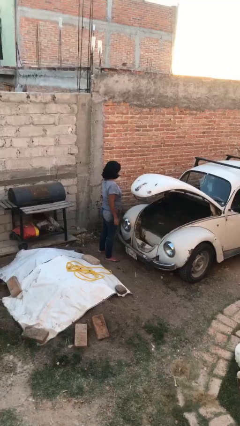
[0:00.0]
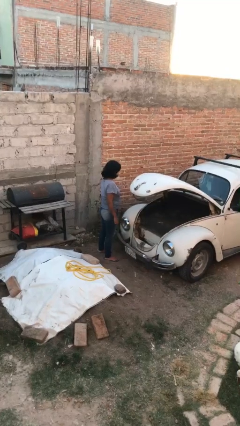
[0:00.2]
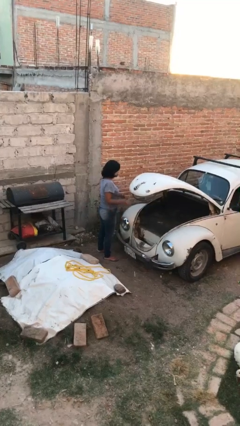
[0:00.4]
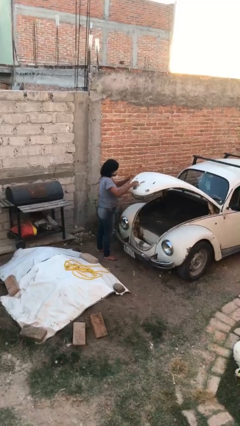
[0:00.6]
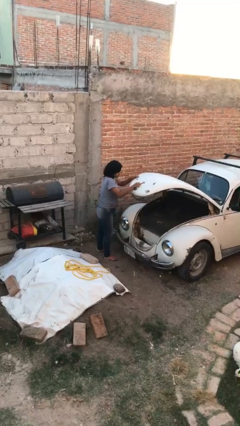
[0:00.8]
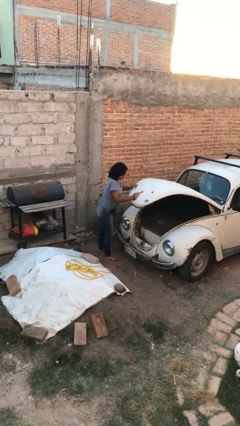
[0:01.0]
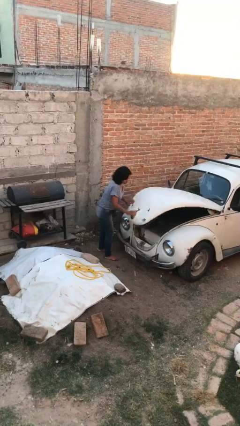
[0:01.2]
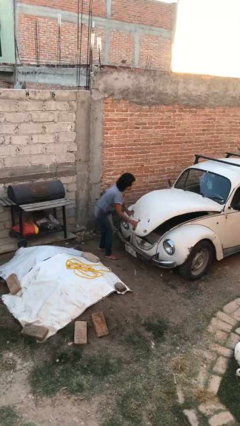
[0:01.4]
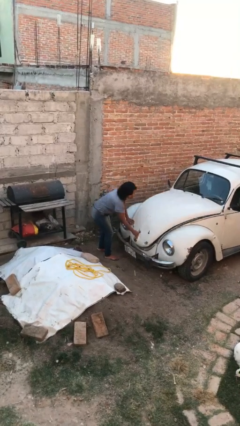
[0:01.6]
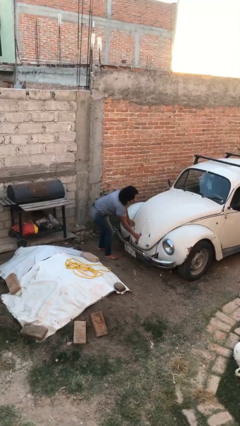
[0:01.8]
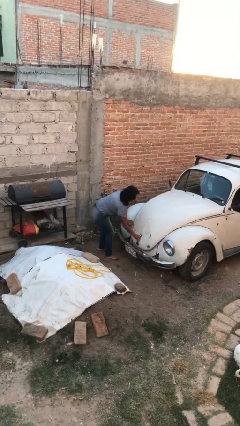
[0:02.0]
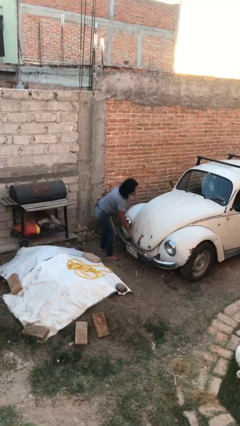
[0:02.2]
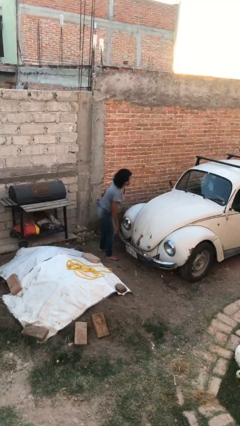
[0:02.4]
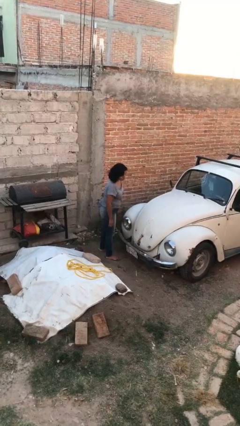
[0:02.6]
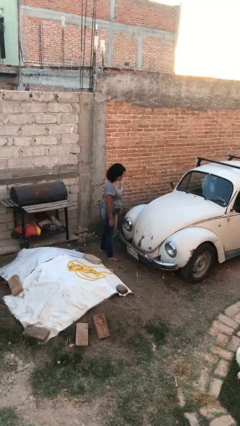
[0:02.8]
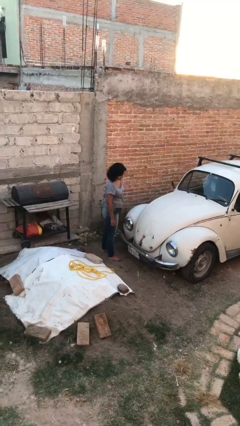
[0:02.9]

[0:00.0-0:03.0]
person closes car trunk

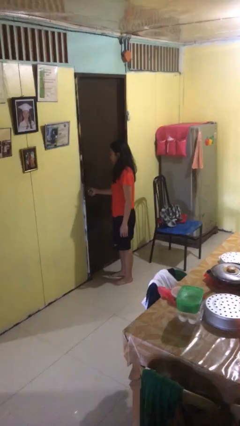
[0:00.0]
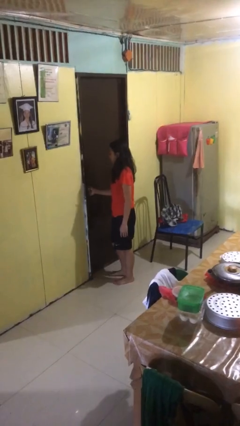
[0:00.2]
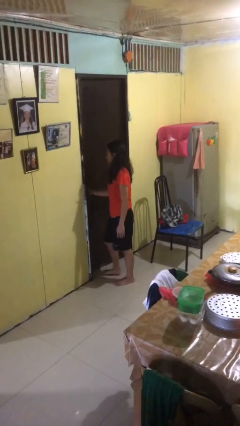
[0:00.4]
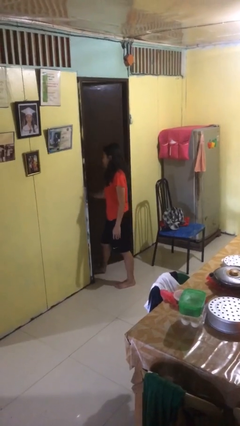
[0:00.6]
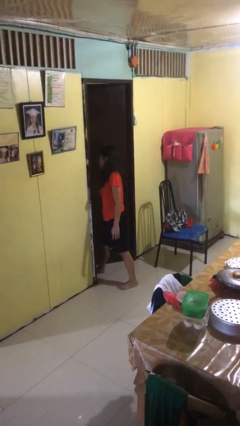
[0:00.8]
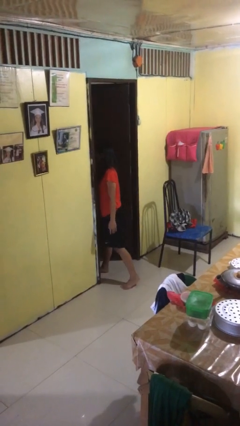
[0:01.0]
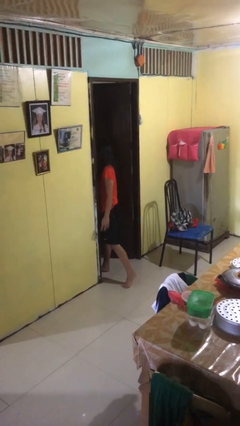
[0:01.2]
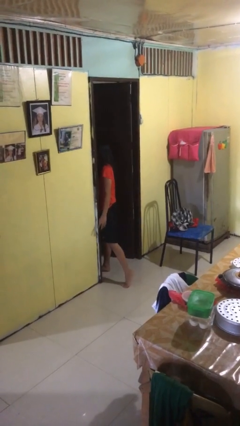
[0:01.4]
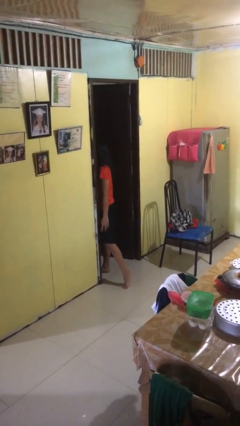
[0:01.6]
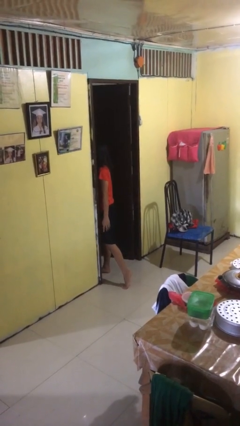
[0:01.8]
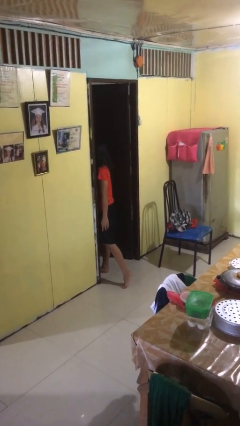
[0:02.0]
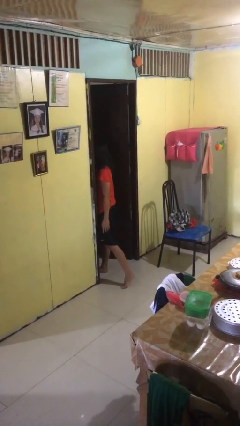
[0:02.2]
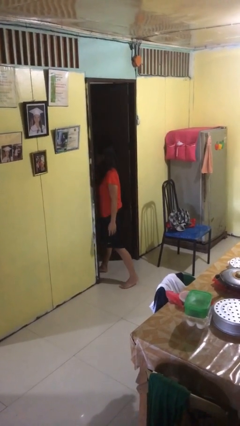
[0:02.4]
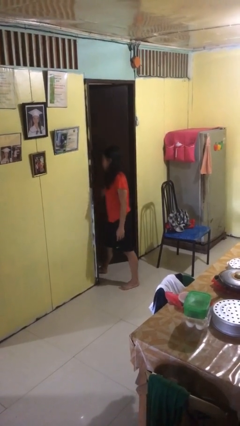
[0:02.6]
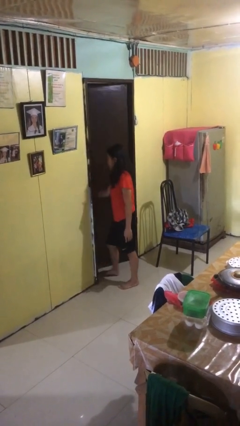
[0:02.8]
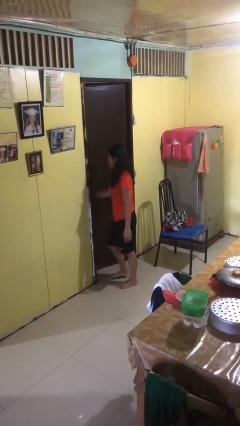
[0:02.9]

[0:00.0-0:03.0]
person opens facility door

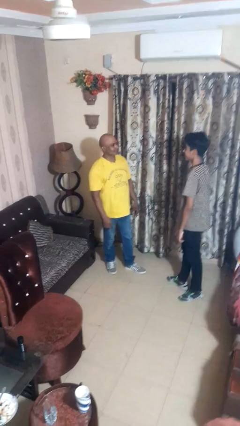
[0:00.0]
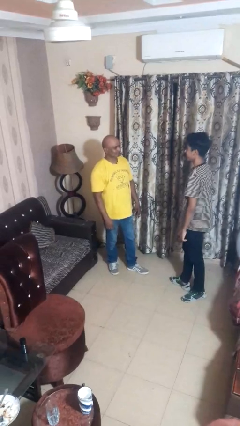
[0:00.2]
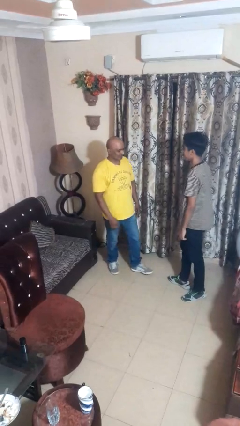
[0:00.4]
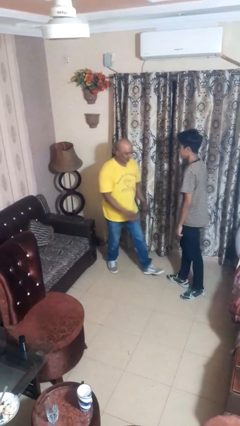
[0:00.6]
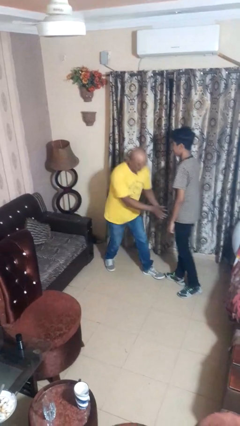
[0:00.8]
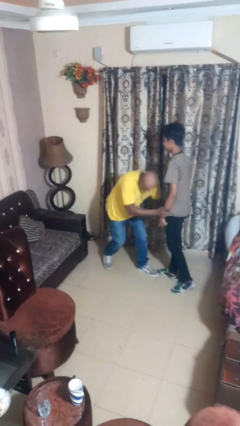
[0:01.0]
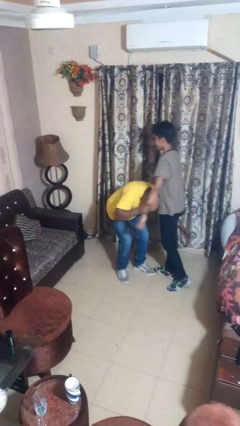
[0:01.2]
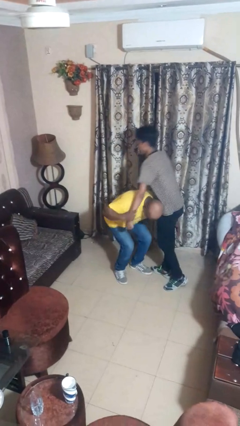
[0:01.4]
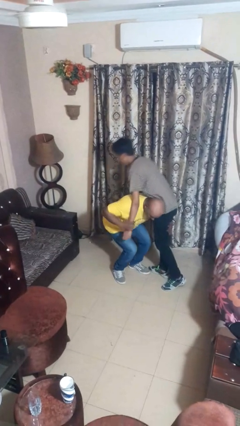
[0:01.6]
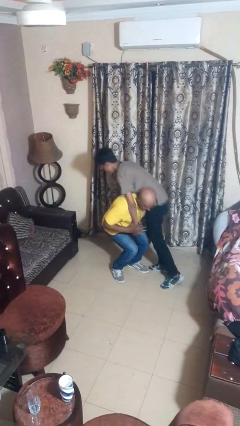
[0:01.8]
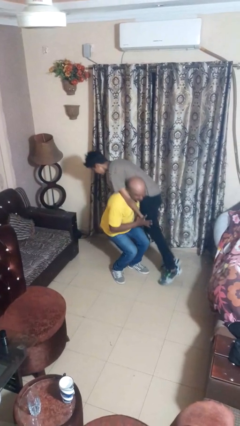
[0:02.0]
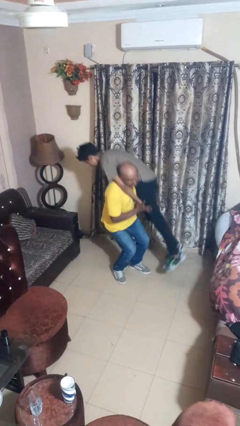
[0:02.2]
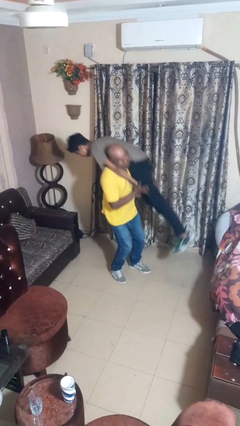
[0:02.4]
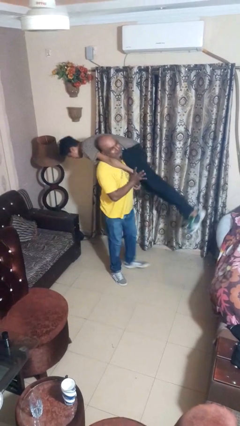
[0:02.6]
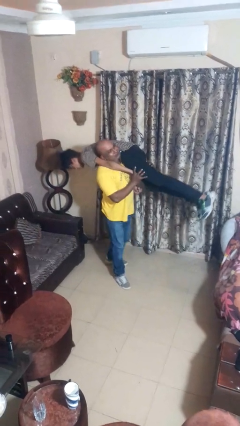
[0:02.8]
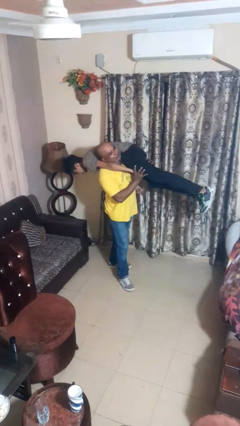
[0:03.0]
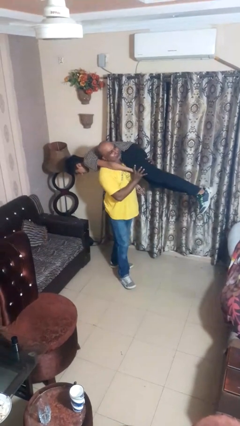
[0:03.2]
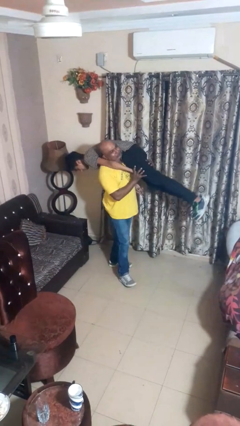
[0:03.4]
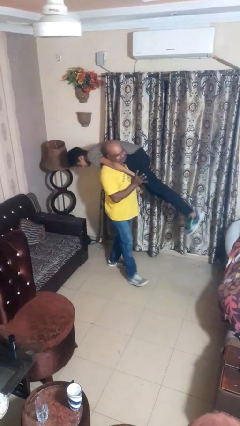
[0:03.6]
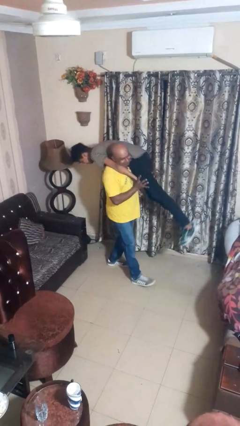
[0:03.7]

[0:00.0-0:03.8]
person carries person over shoulder

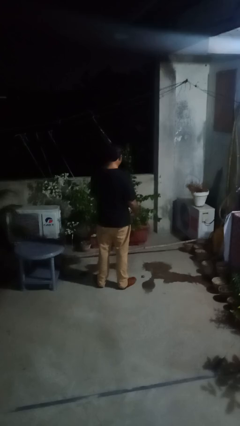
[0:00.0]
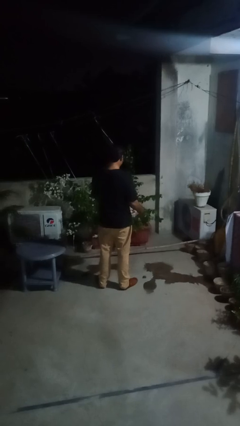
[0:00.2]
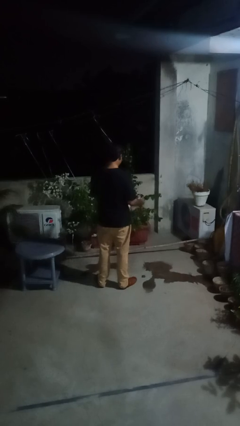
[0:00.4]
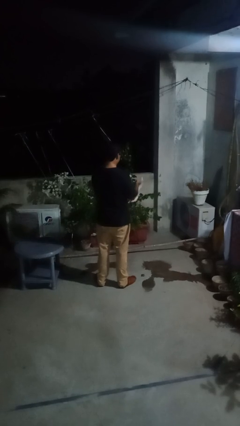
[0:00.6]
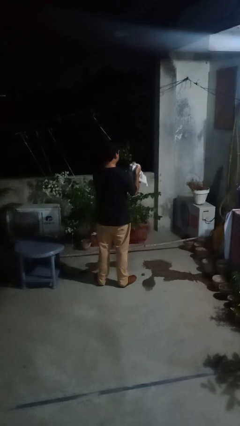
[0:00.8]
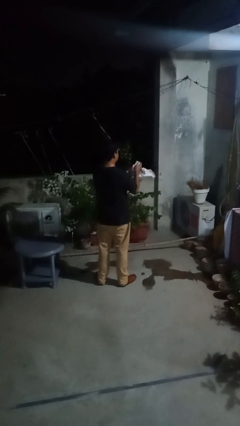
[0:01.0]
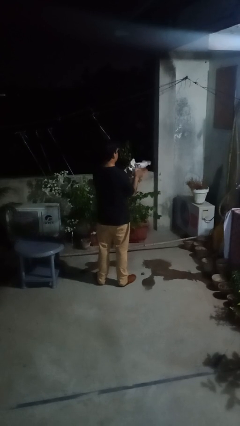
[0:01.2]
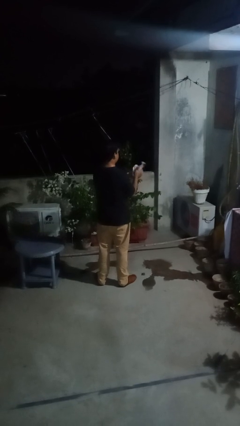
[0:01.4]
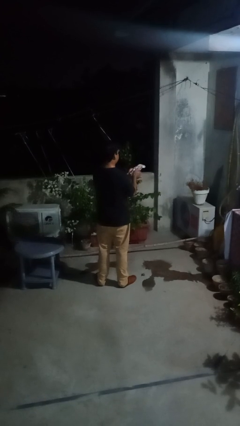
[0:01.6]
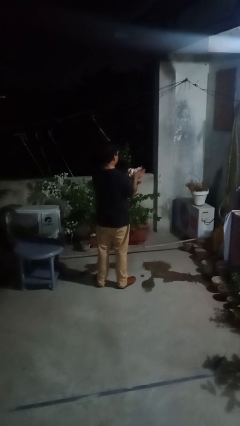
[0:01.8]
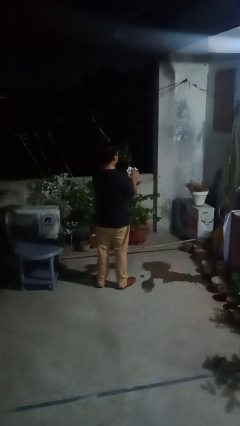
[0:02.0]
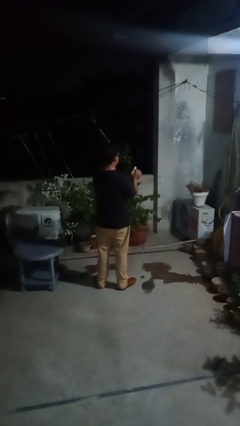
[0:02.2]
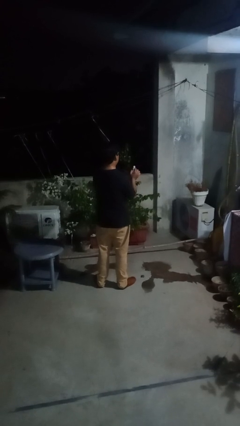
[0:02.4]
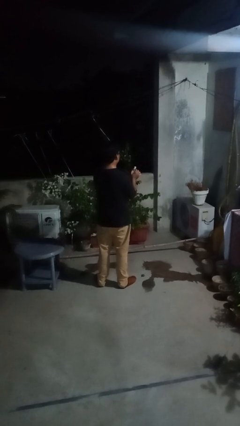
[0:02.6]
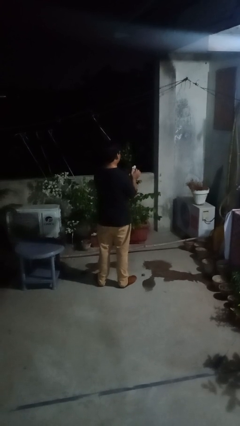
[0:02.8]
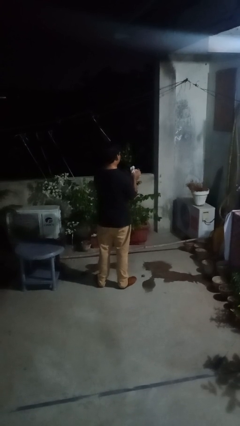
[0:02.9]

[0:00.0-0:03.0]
person crumples paper

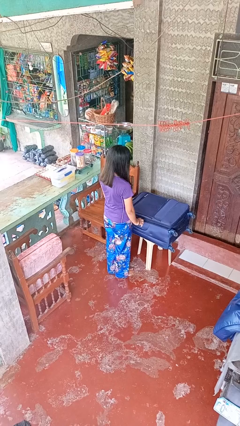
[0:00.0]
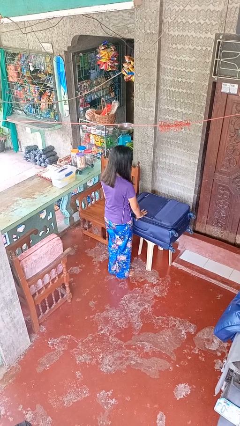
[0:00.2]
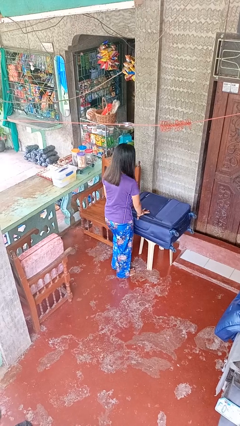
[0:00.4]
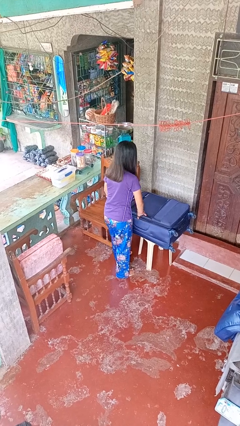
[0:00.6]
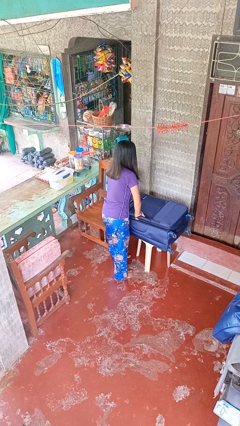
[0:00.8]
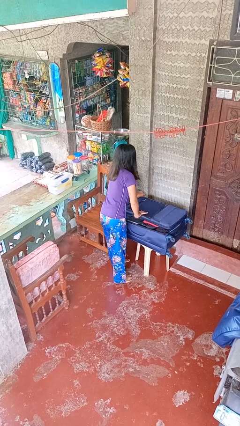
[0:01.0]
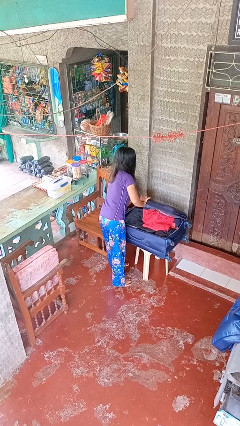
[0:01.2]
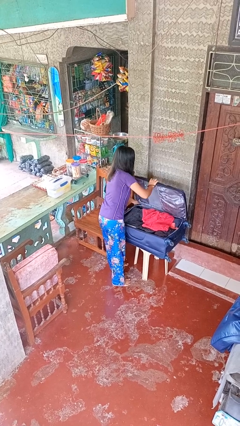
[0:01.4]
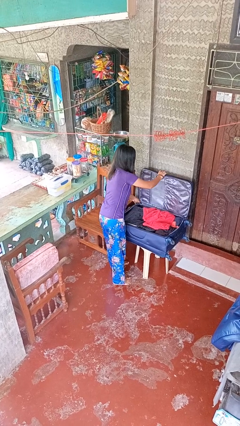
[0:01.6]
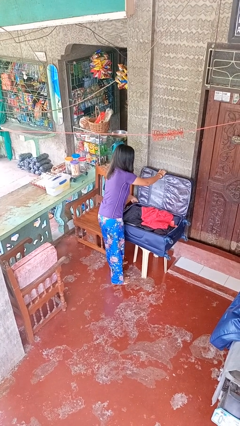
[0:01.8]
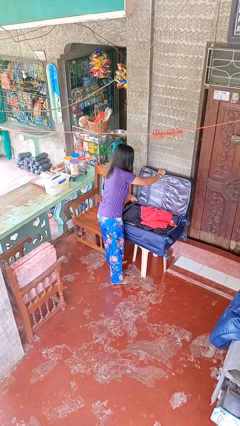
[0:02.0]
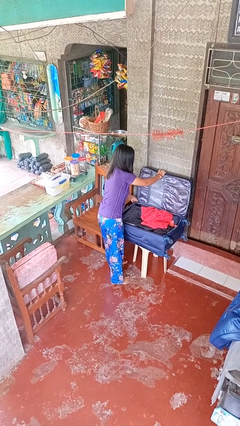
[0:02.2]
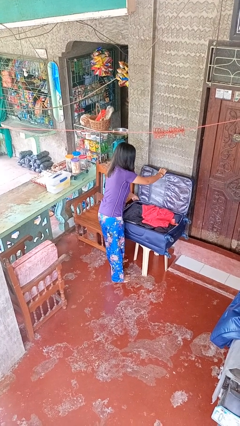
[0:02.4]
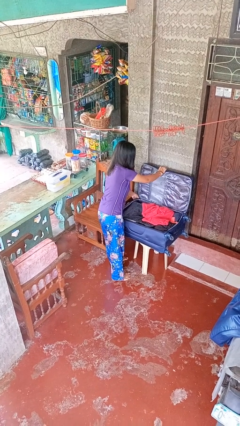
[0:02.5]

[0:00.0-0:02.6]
person opens suitcase

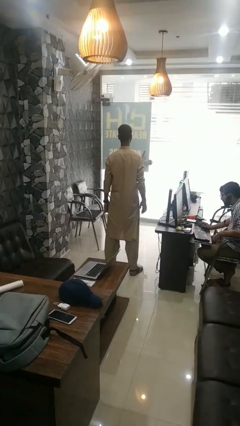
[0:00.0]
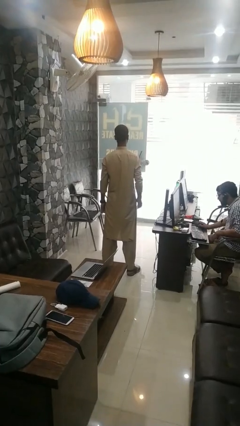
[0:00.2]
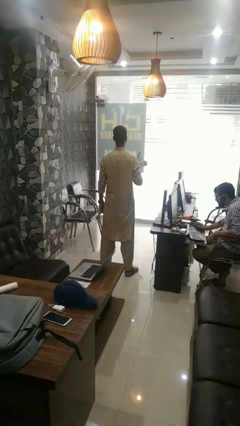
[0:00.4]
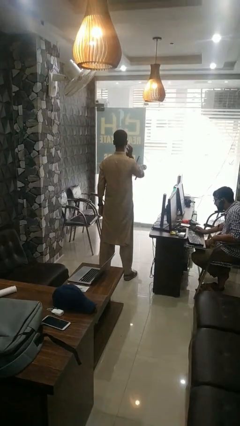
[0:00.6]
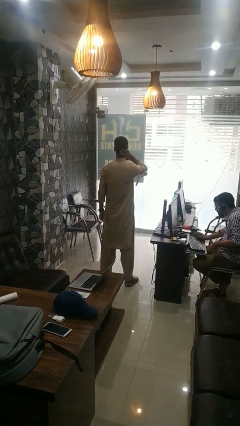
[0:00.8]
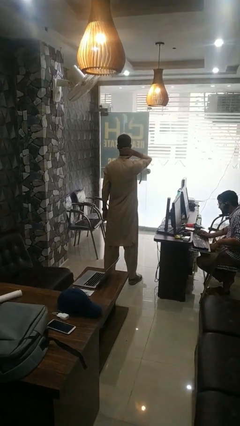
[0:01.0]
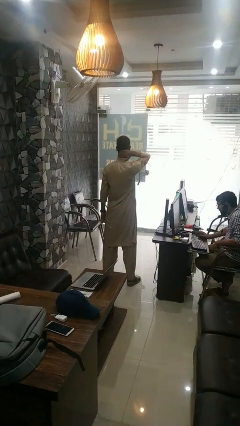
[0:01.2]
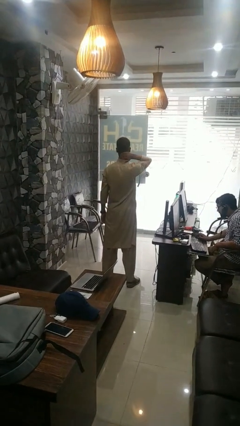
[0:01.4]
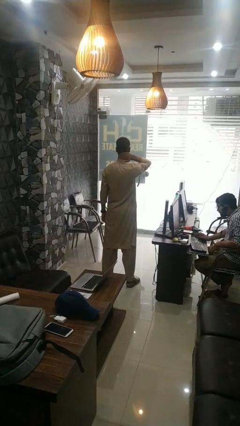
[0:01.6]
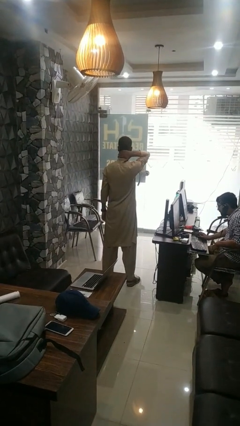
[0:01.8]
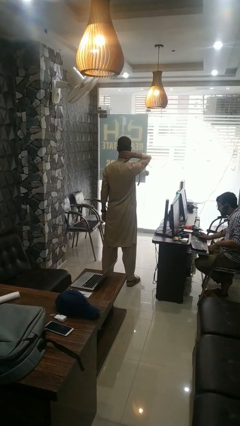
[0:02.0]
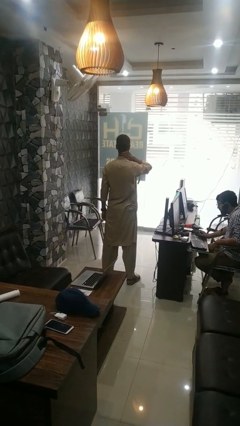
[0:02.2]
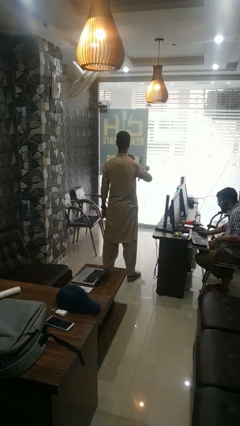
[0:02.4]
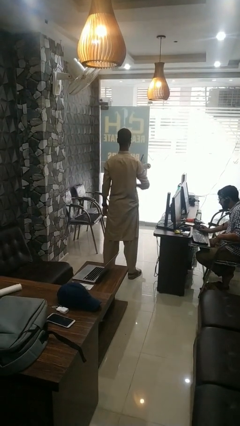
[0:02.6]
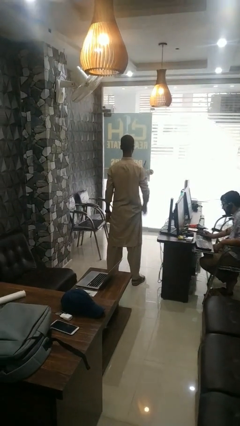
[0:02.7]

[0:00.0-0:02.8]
person rubs neck
